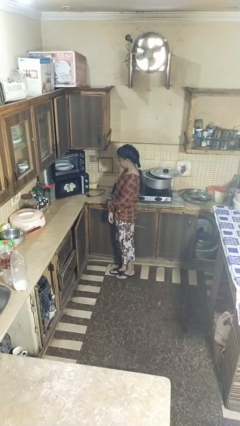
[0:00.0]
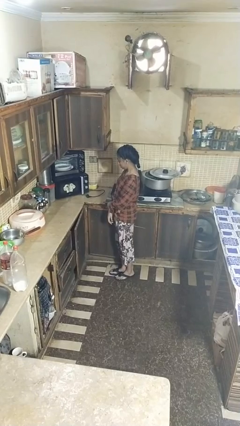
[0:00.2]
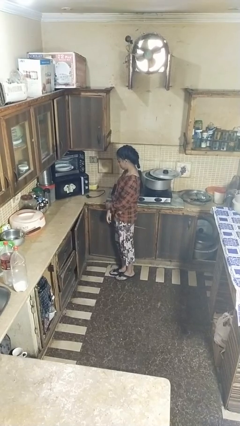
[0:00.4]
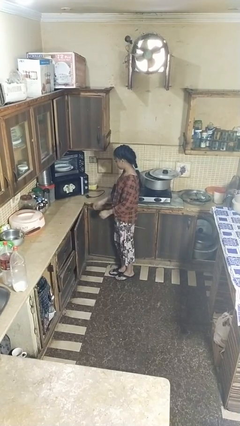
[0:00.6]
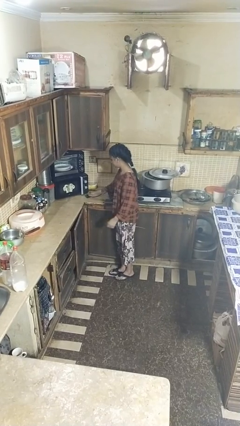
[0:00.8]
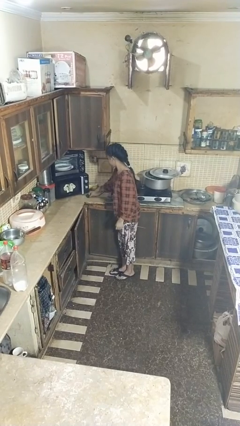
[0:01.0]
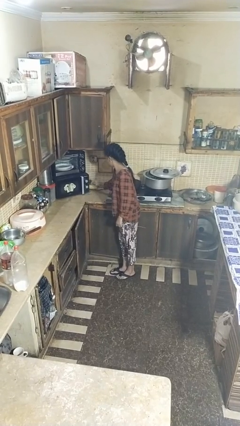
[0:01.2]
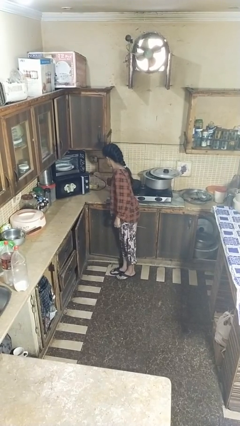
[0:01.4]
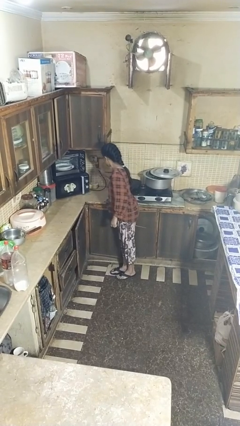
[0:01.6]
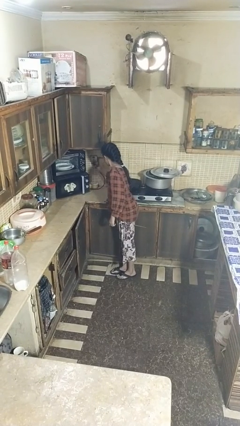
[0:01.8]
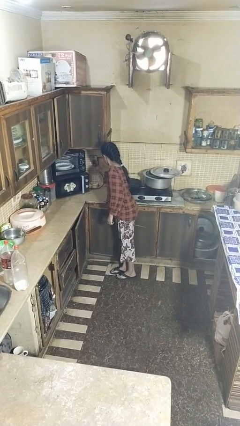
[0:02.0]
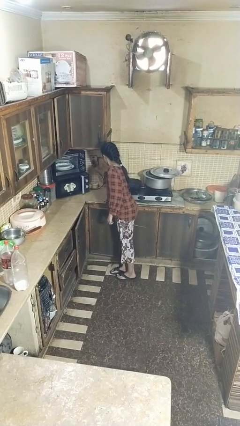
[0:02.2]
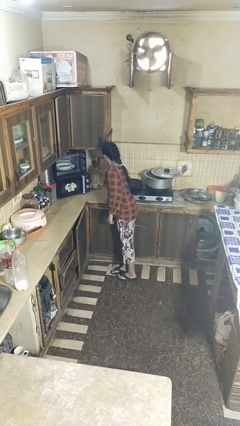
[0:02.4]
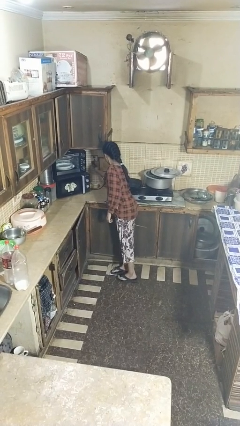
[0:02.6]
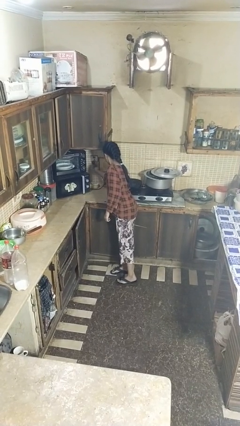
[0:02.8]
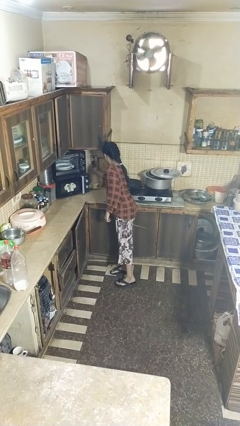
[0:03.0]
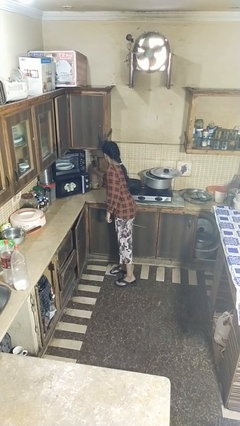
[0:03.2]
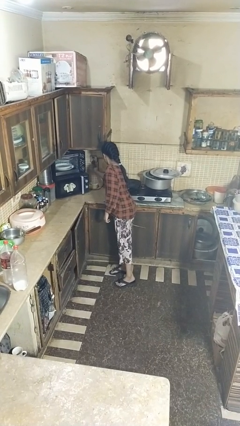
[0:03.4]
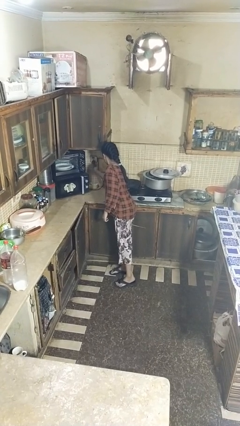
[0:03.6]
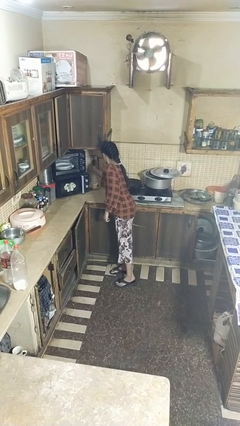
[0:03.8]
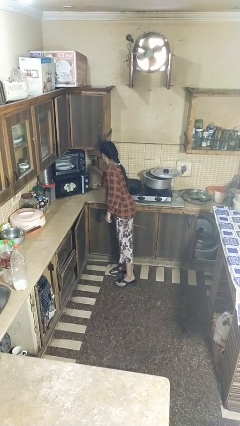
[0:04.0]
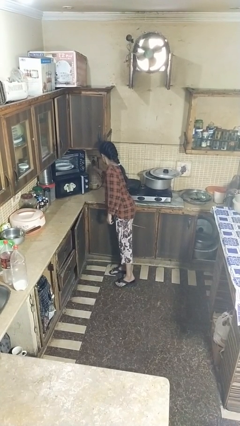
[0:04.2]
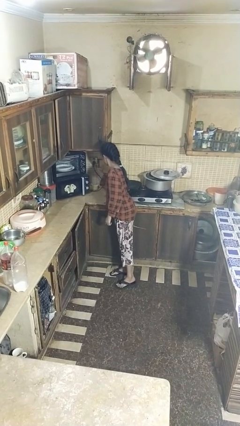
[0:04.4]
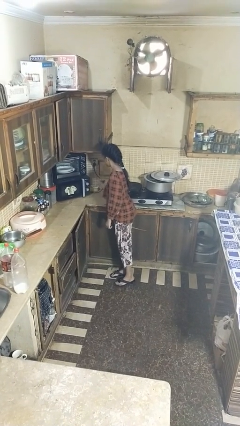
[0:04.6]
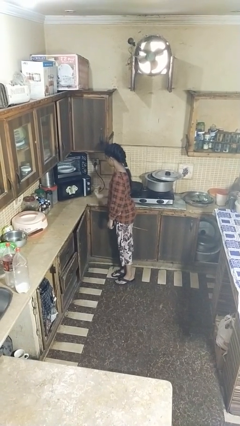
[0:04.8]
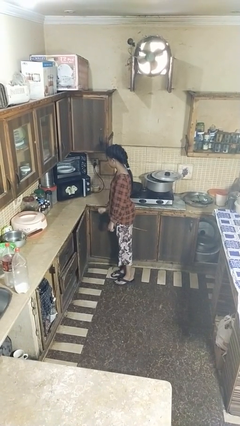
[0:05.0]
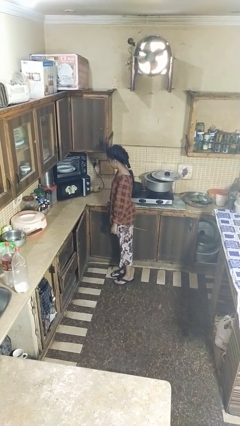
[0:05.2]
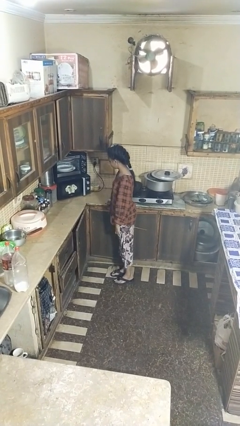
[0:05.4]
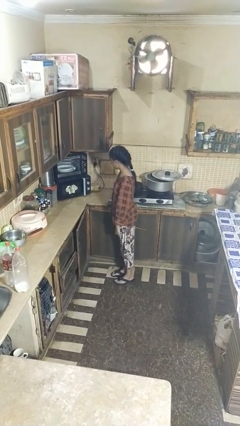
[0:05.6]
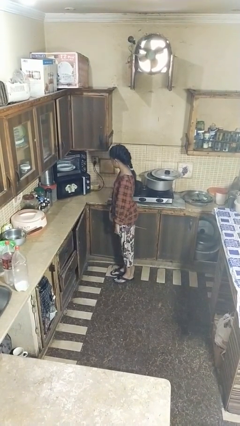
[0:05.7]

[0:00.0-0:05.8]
person plugs into electrical socket

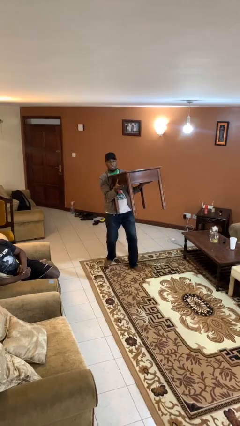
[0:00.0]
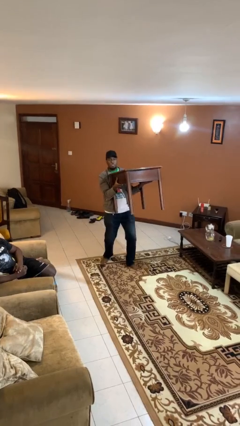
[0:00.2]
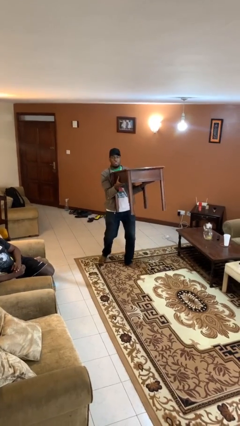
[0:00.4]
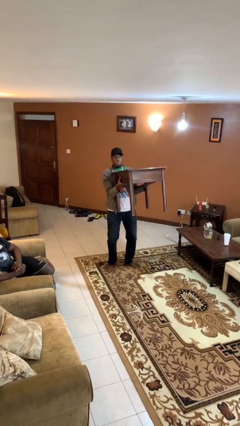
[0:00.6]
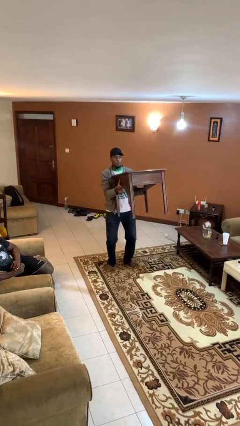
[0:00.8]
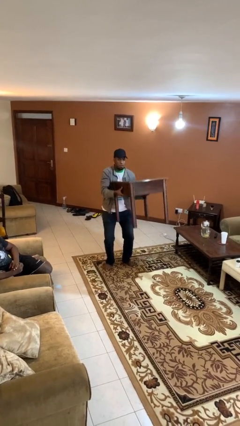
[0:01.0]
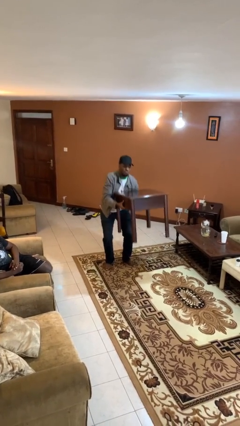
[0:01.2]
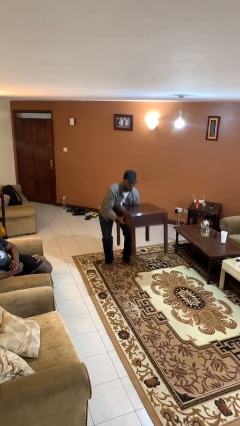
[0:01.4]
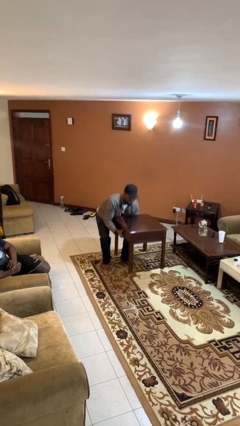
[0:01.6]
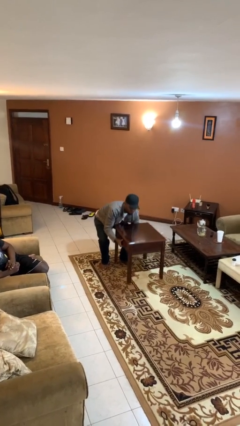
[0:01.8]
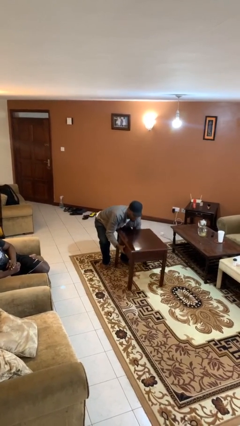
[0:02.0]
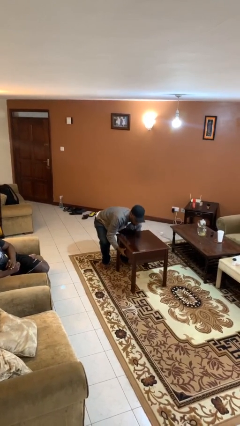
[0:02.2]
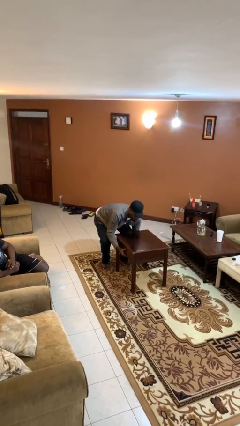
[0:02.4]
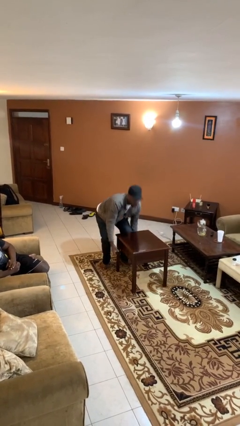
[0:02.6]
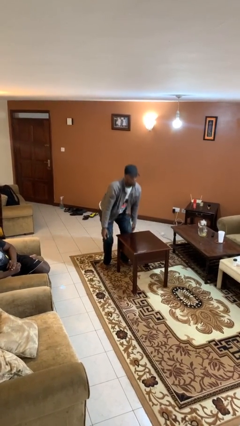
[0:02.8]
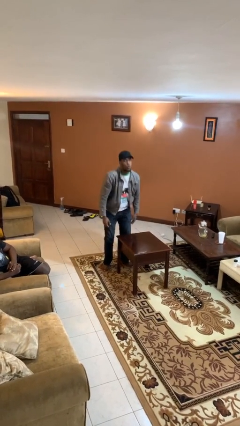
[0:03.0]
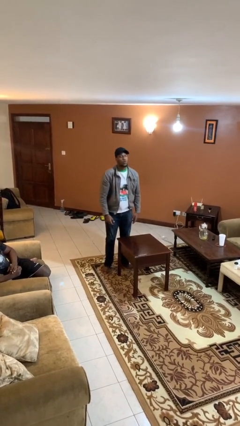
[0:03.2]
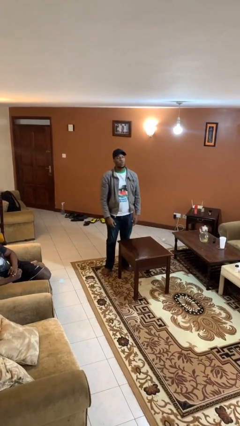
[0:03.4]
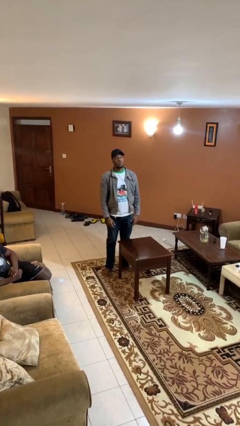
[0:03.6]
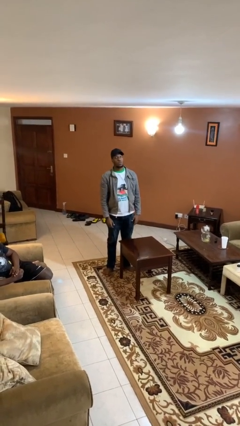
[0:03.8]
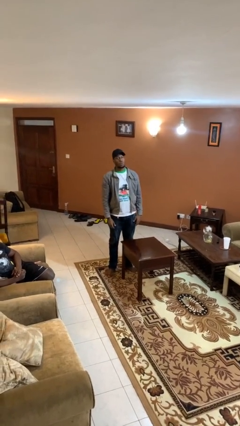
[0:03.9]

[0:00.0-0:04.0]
person puts down object on floor

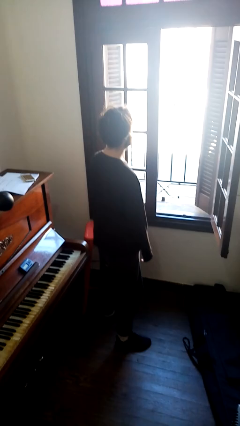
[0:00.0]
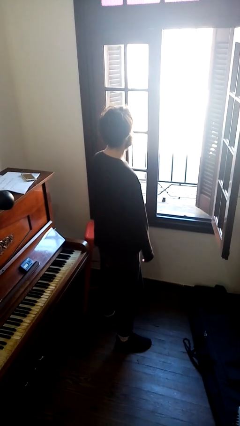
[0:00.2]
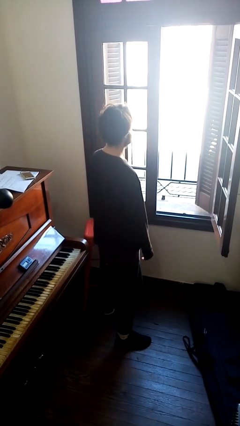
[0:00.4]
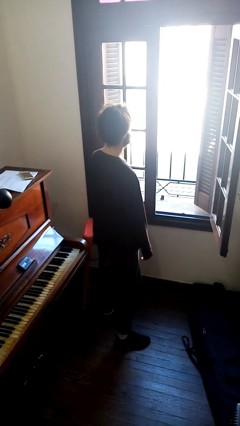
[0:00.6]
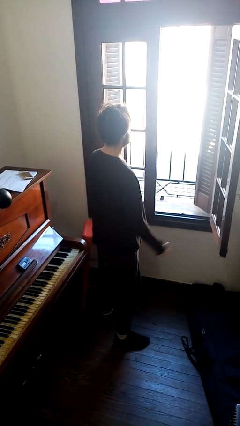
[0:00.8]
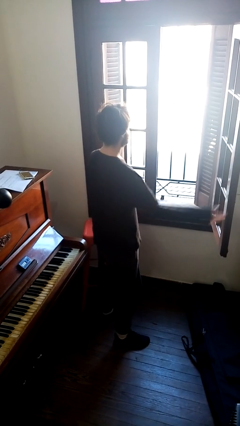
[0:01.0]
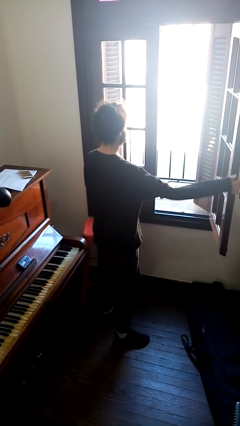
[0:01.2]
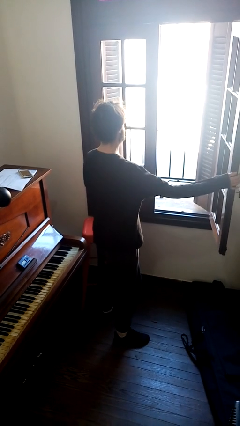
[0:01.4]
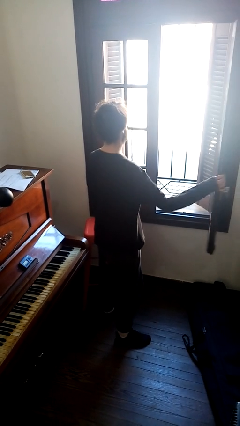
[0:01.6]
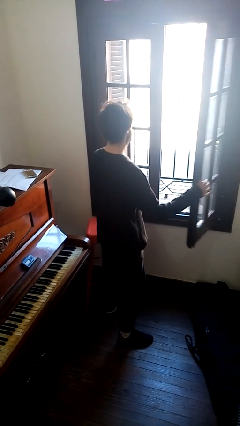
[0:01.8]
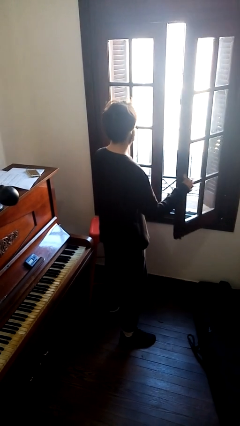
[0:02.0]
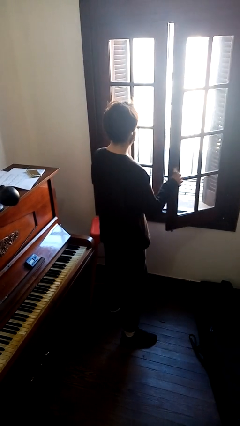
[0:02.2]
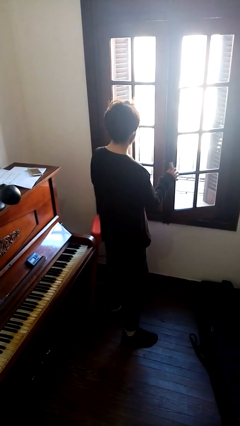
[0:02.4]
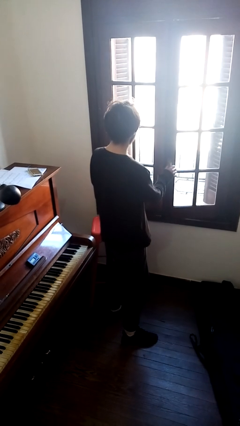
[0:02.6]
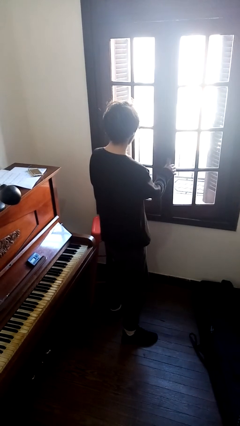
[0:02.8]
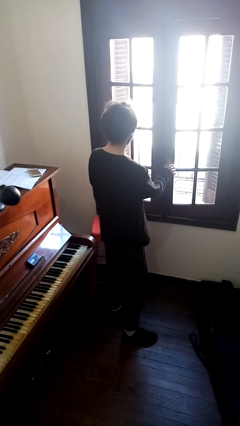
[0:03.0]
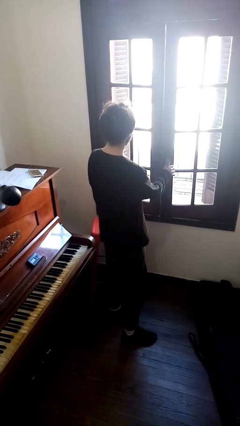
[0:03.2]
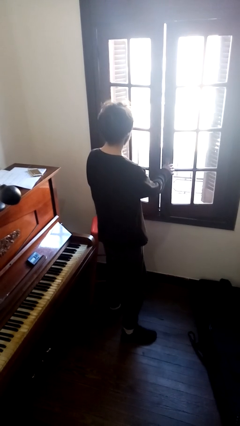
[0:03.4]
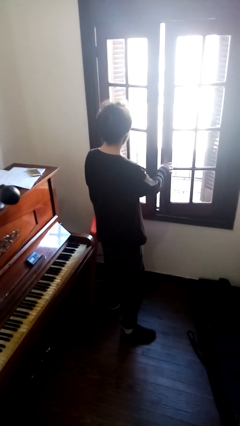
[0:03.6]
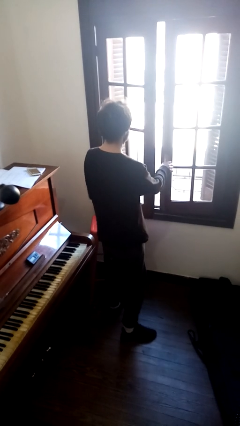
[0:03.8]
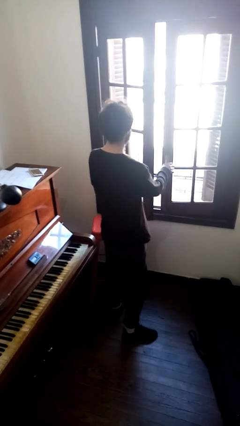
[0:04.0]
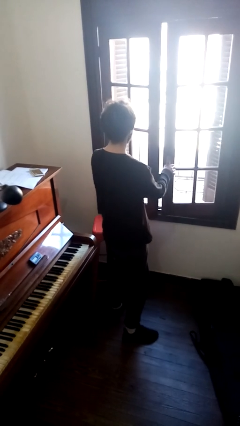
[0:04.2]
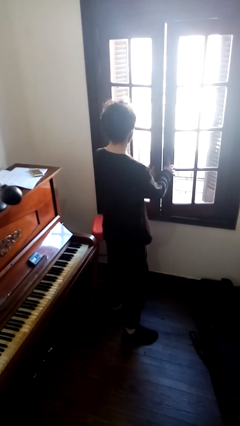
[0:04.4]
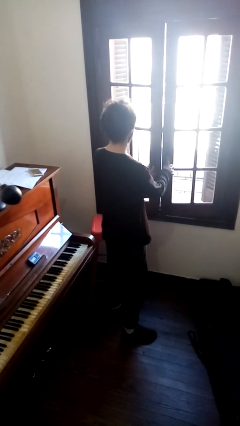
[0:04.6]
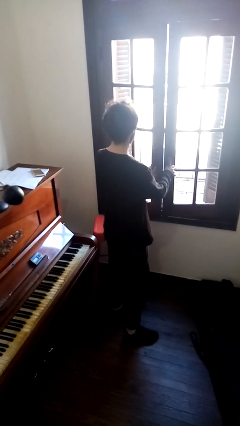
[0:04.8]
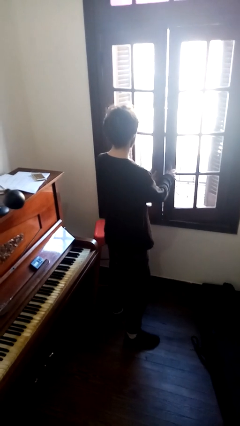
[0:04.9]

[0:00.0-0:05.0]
person closes home window

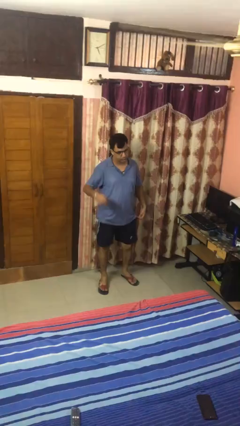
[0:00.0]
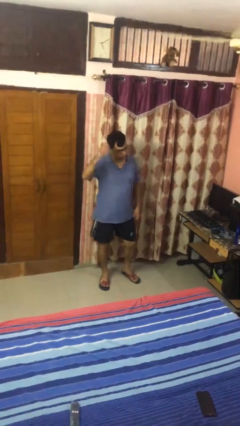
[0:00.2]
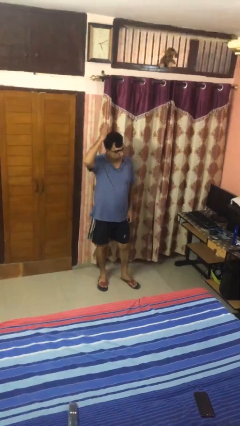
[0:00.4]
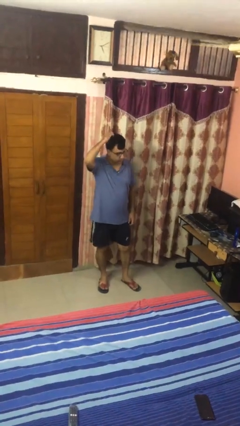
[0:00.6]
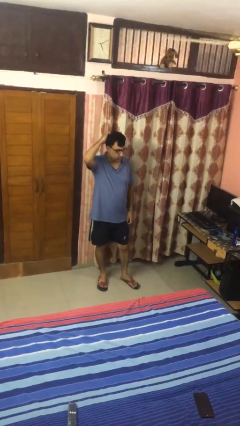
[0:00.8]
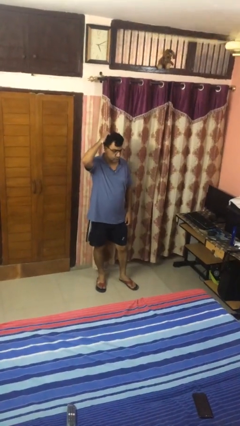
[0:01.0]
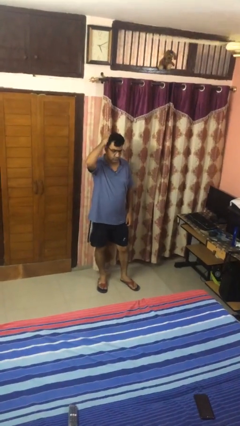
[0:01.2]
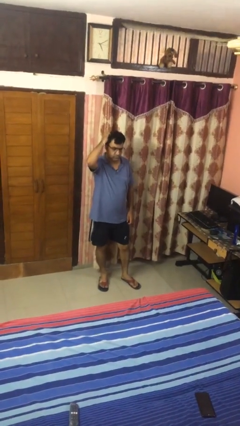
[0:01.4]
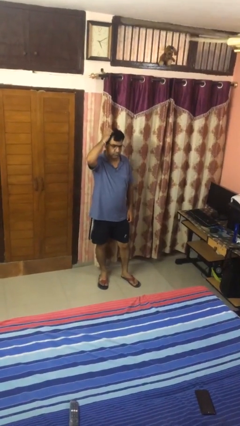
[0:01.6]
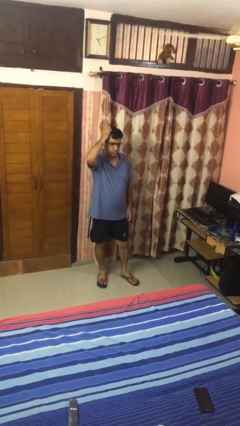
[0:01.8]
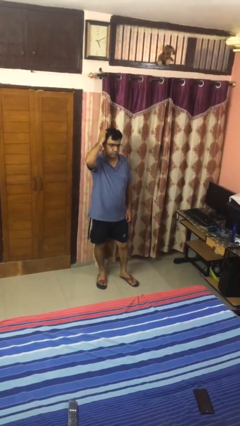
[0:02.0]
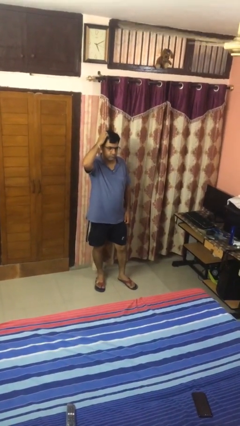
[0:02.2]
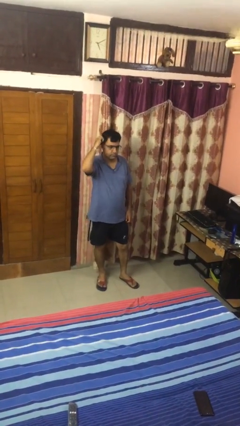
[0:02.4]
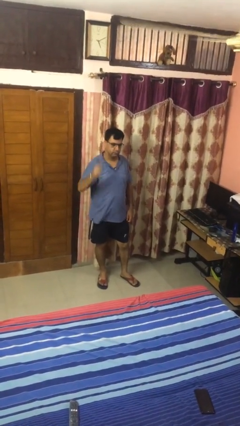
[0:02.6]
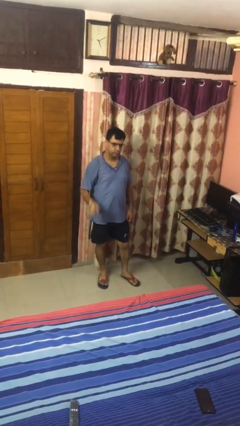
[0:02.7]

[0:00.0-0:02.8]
person scratches face

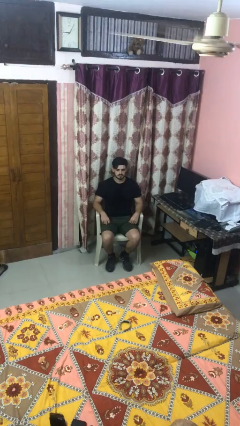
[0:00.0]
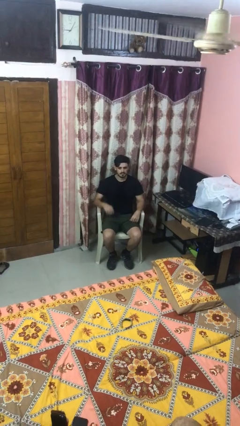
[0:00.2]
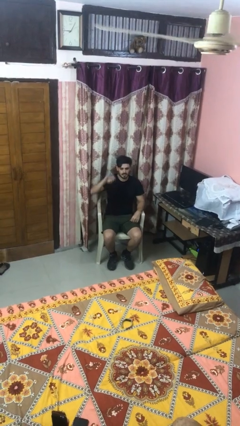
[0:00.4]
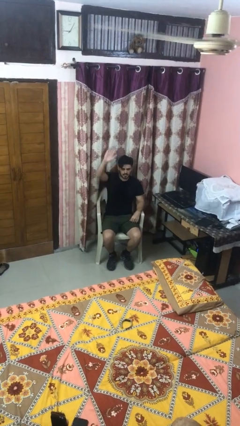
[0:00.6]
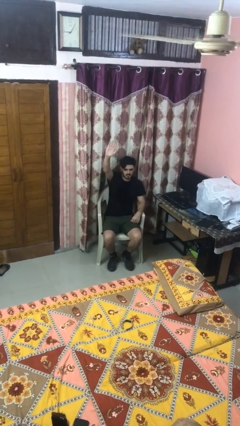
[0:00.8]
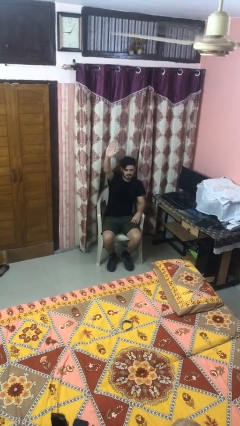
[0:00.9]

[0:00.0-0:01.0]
person gestures raise hand
